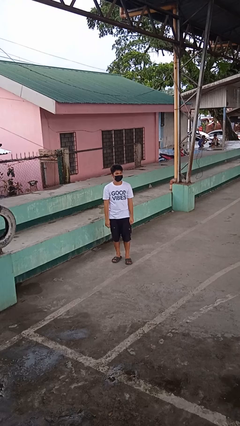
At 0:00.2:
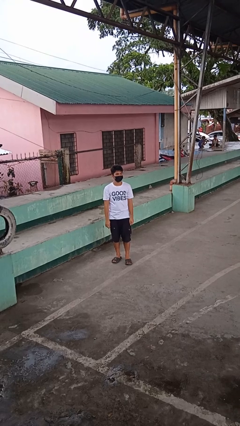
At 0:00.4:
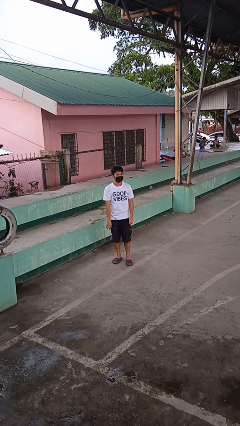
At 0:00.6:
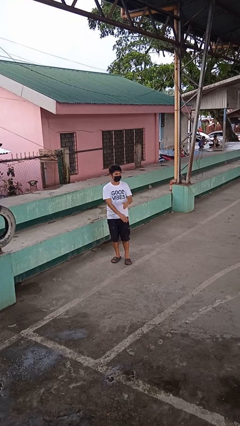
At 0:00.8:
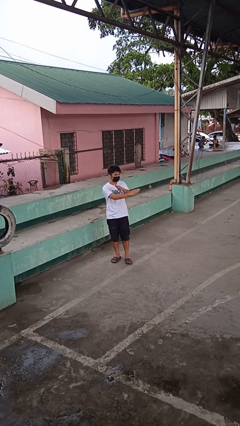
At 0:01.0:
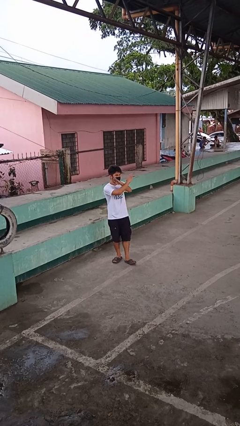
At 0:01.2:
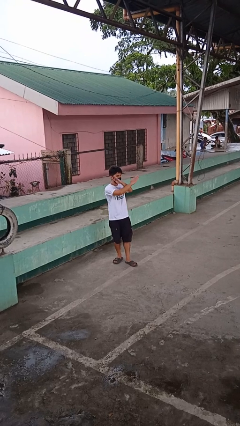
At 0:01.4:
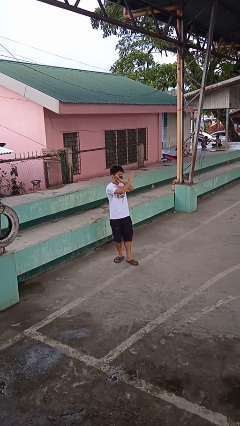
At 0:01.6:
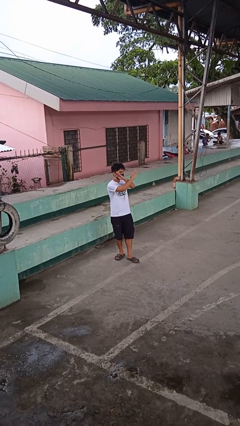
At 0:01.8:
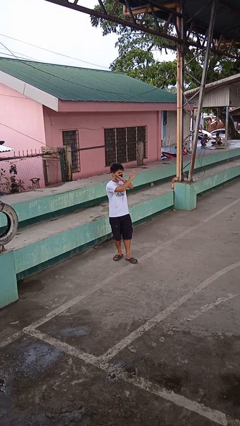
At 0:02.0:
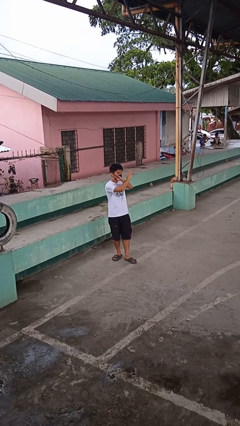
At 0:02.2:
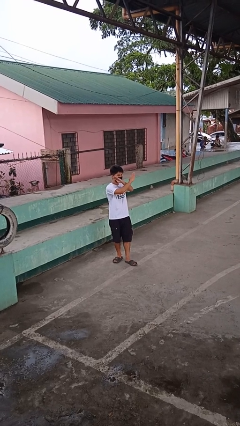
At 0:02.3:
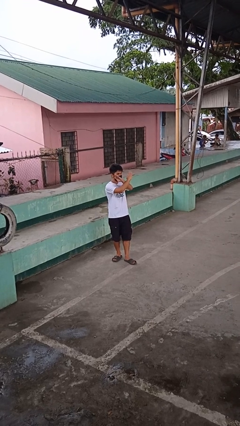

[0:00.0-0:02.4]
person gestures arms x

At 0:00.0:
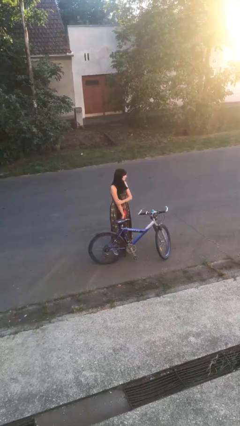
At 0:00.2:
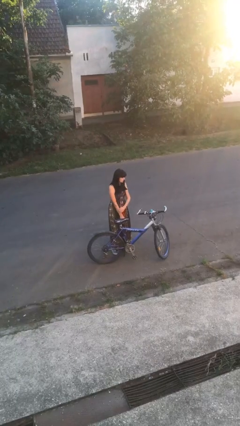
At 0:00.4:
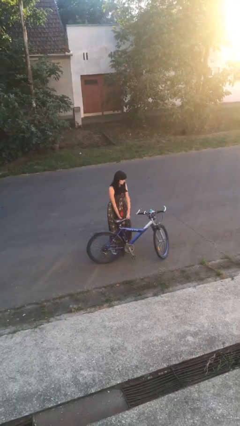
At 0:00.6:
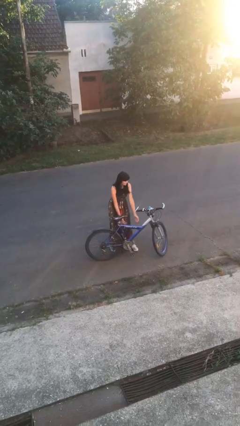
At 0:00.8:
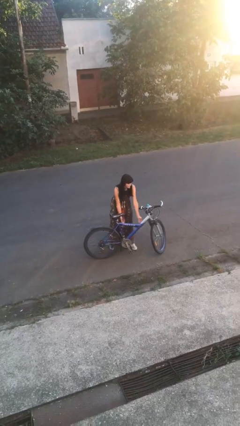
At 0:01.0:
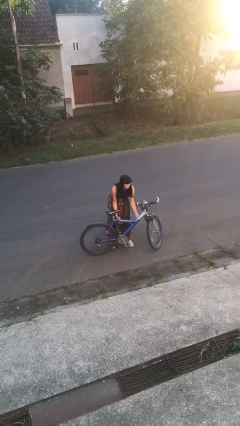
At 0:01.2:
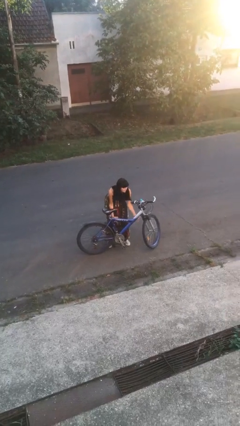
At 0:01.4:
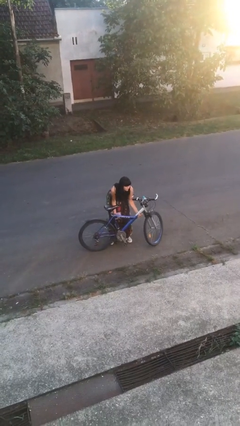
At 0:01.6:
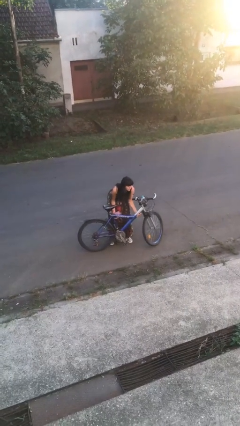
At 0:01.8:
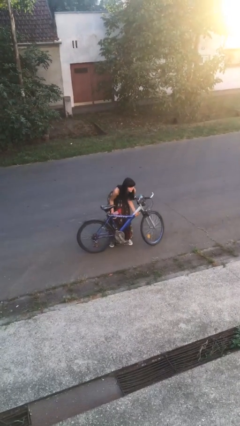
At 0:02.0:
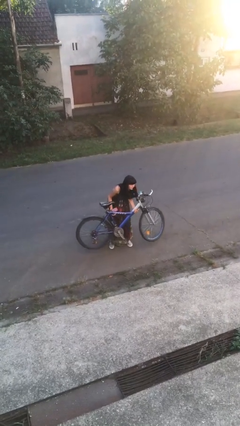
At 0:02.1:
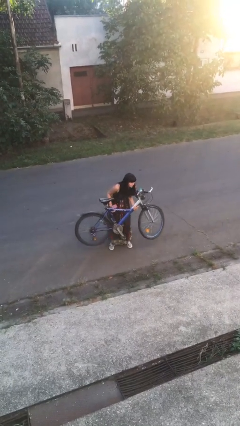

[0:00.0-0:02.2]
person picks up object from floor

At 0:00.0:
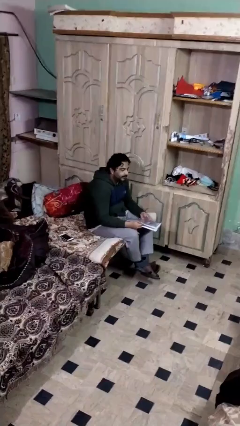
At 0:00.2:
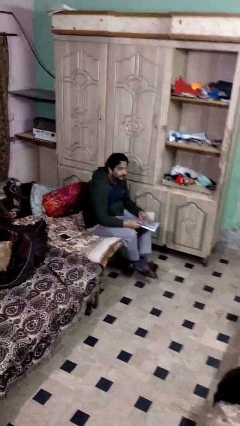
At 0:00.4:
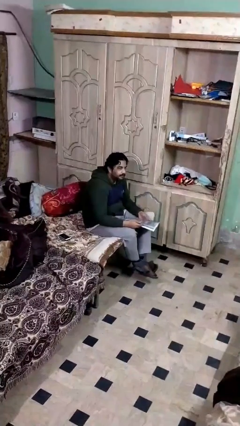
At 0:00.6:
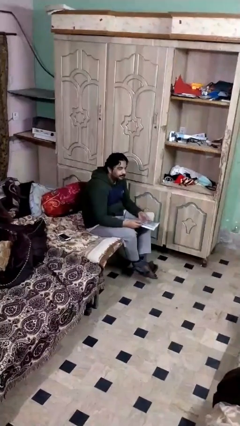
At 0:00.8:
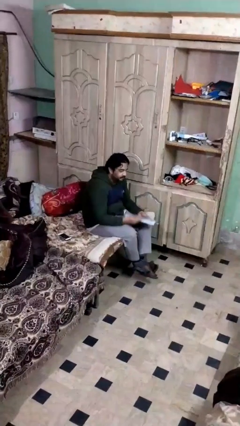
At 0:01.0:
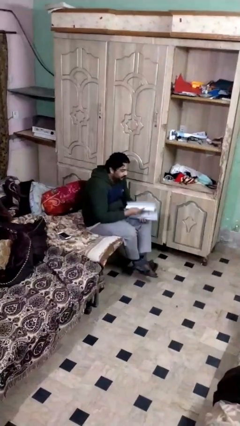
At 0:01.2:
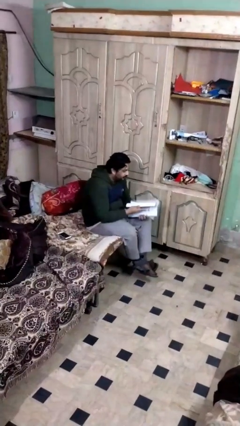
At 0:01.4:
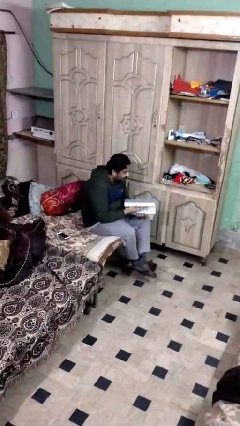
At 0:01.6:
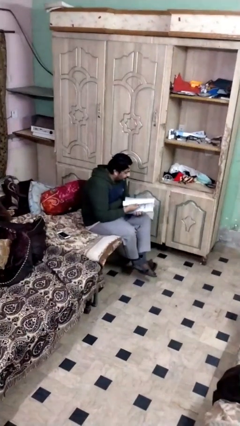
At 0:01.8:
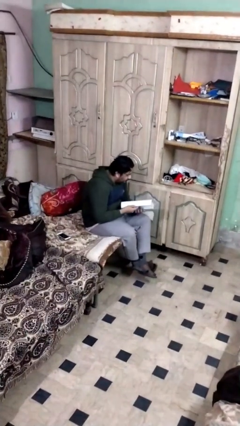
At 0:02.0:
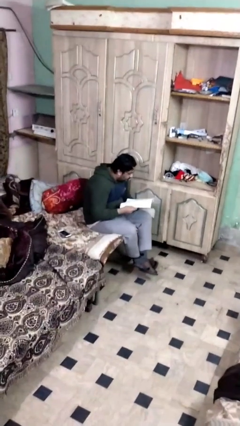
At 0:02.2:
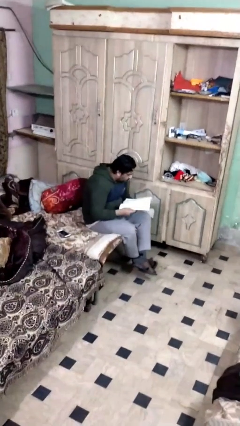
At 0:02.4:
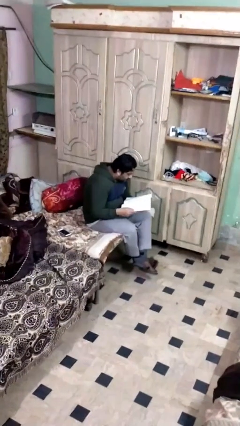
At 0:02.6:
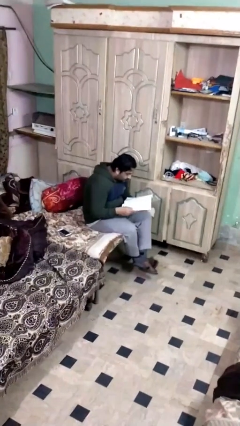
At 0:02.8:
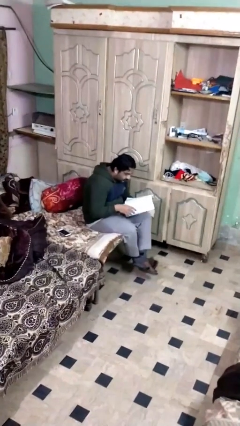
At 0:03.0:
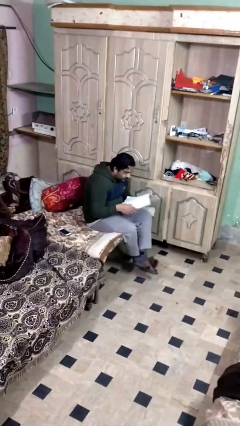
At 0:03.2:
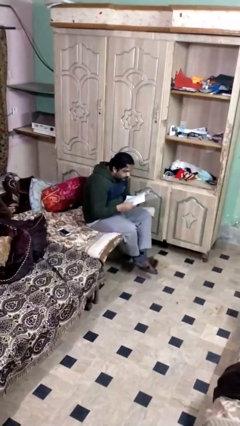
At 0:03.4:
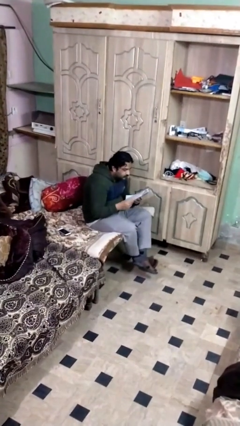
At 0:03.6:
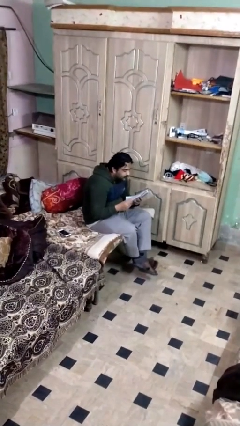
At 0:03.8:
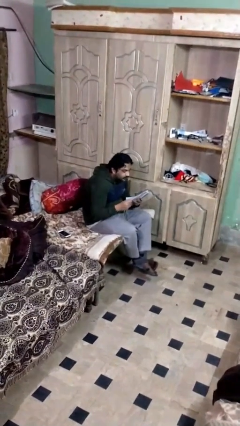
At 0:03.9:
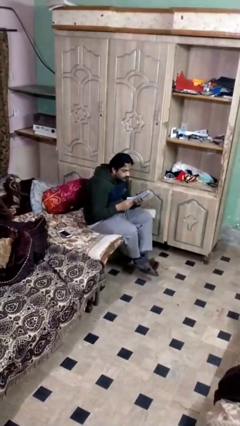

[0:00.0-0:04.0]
person reads document

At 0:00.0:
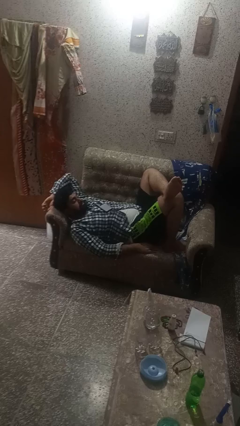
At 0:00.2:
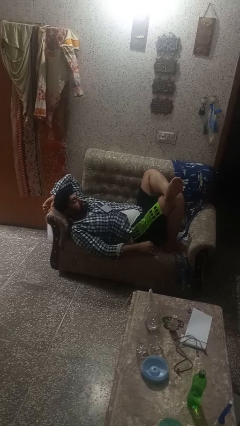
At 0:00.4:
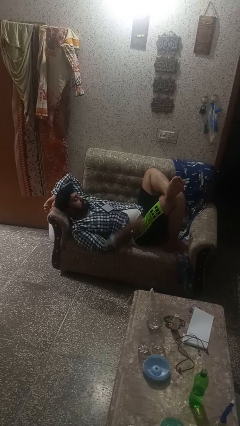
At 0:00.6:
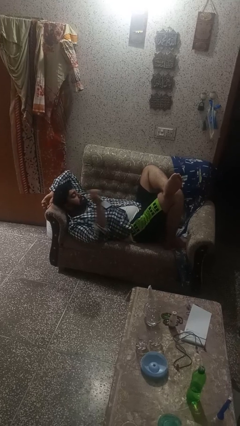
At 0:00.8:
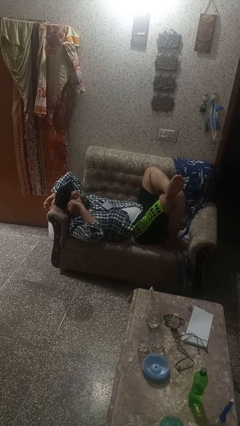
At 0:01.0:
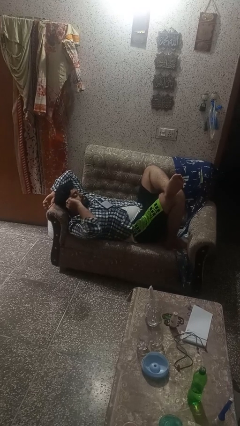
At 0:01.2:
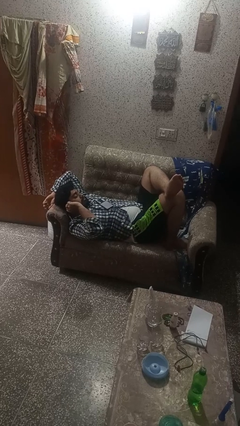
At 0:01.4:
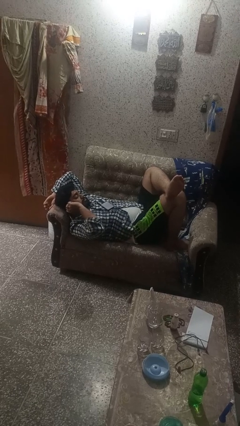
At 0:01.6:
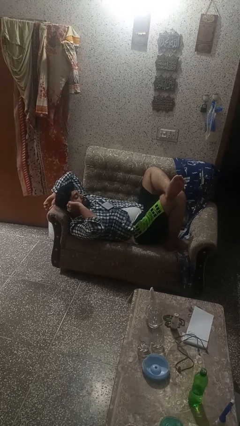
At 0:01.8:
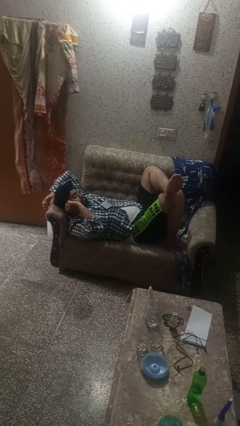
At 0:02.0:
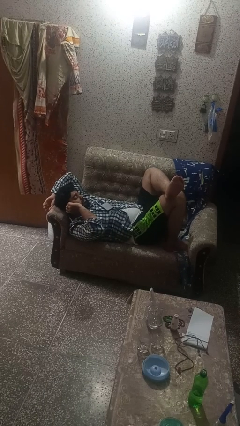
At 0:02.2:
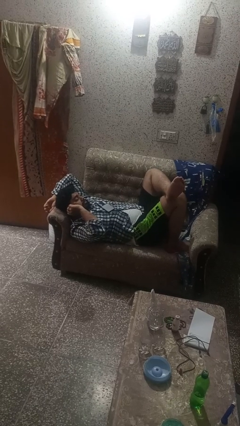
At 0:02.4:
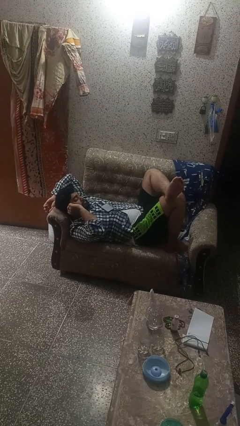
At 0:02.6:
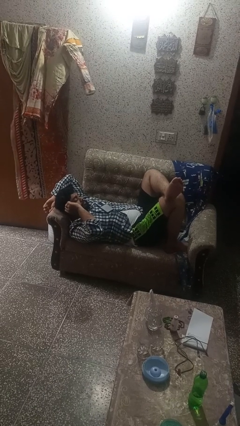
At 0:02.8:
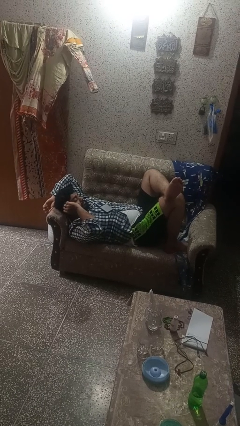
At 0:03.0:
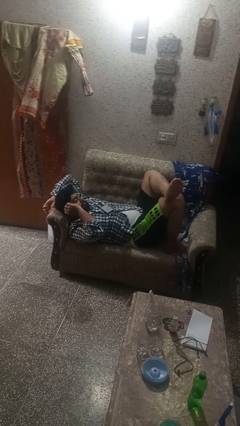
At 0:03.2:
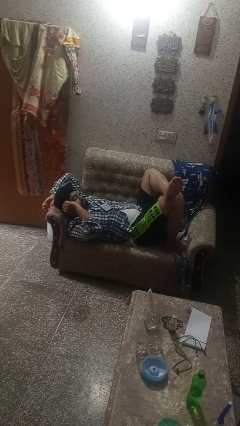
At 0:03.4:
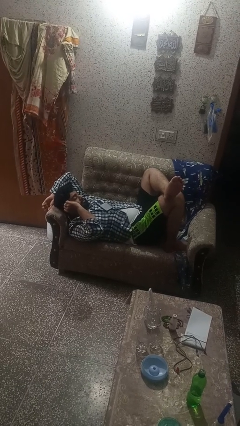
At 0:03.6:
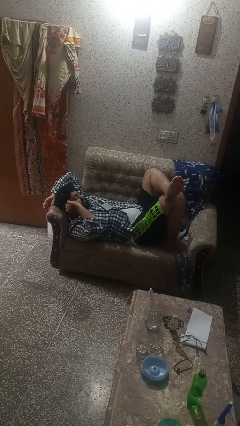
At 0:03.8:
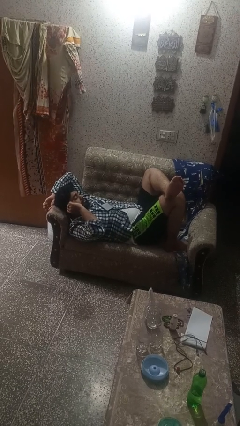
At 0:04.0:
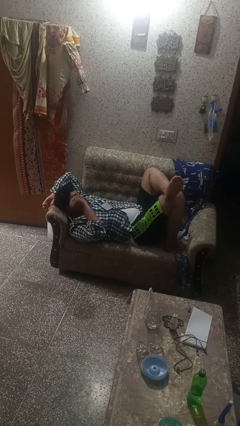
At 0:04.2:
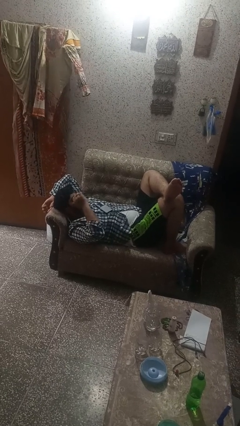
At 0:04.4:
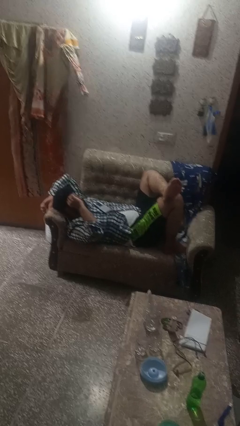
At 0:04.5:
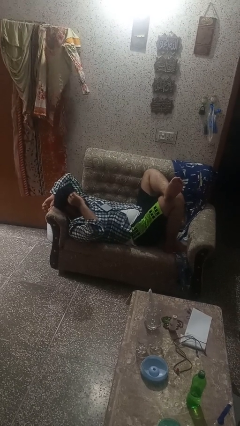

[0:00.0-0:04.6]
person touches earlobe

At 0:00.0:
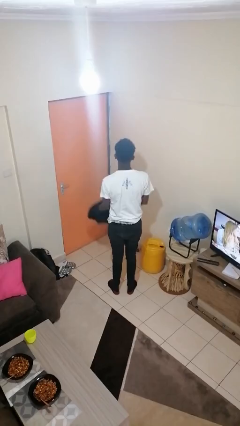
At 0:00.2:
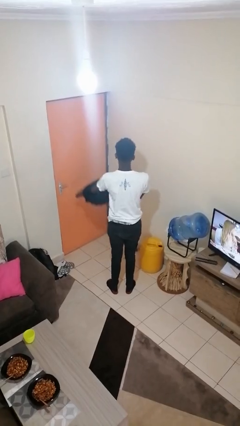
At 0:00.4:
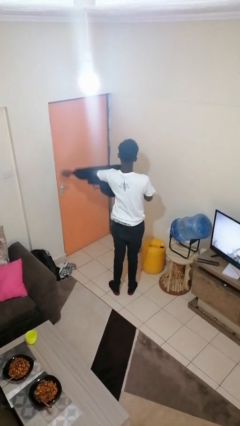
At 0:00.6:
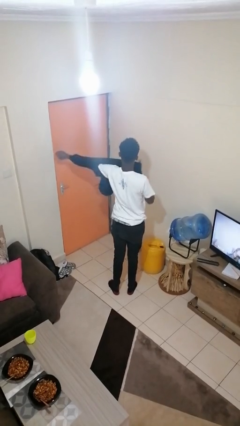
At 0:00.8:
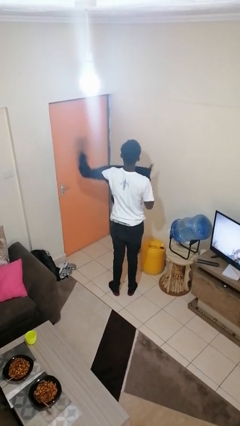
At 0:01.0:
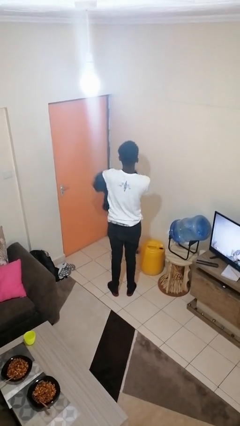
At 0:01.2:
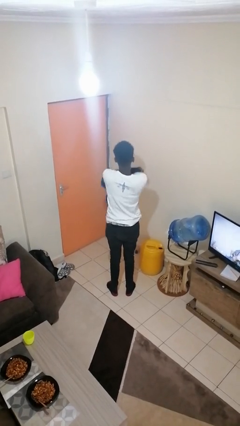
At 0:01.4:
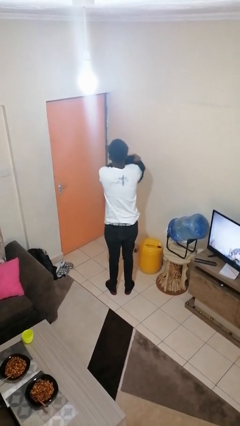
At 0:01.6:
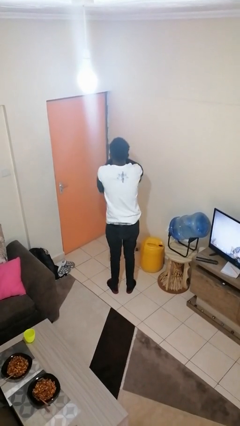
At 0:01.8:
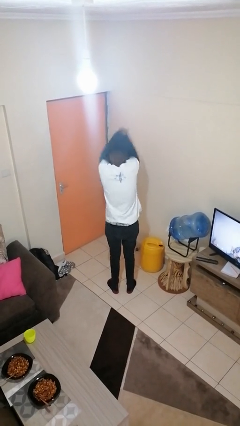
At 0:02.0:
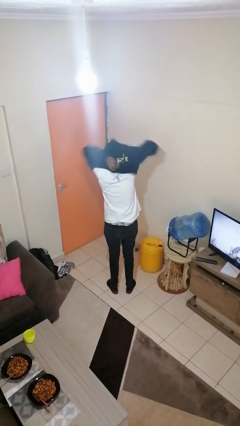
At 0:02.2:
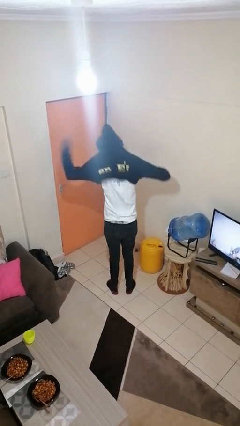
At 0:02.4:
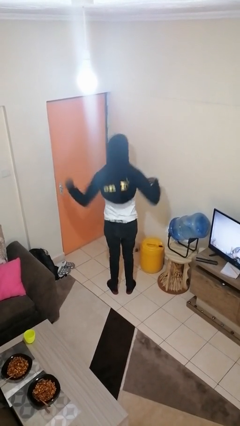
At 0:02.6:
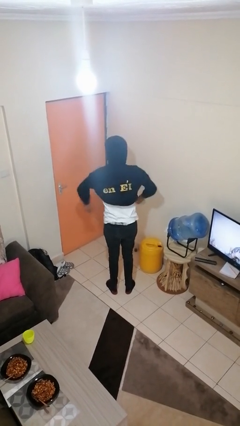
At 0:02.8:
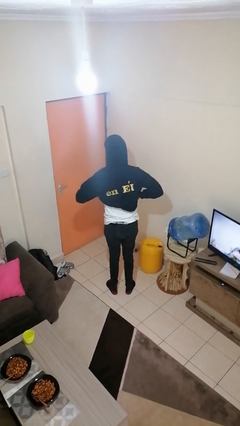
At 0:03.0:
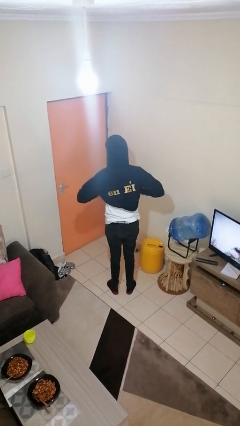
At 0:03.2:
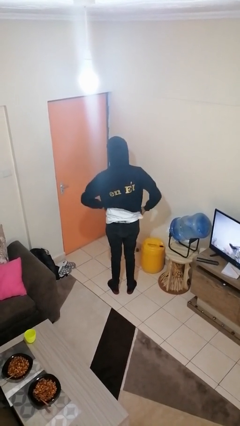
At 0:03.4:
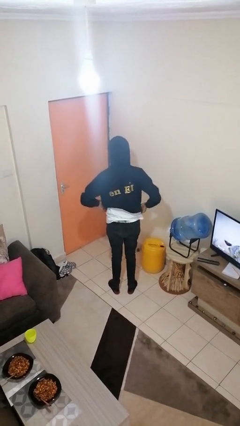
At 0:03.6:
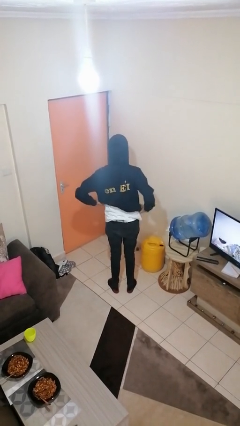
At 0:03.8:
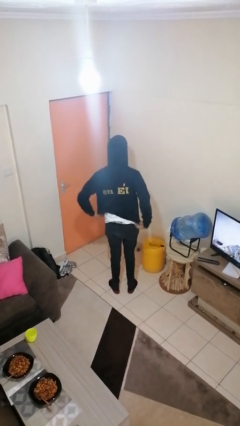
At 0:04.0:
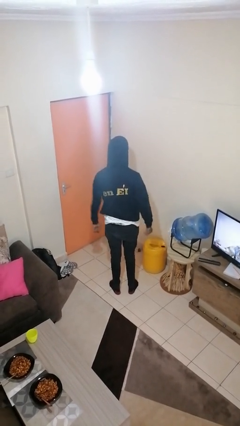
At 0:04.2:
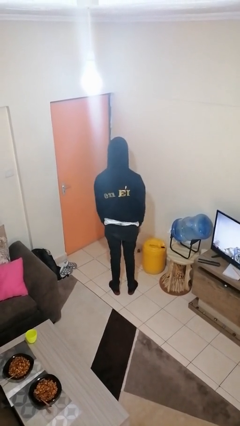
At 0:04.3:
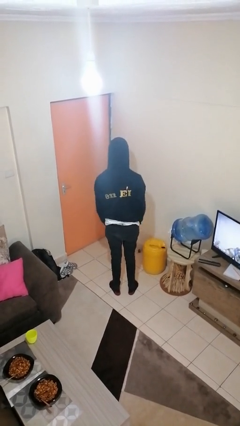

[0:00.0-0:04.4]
person puts on hoodie

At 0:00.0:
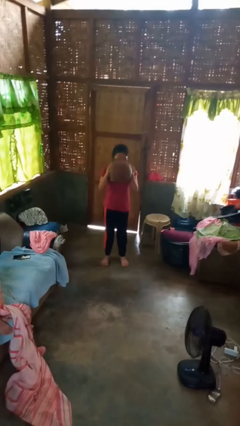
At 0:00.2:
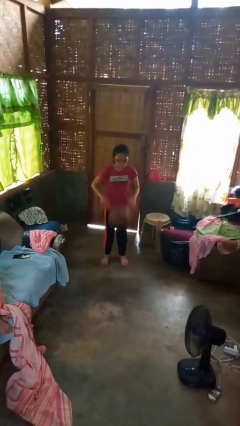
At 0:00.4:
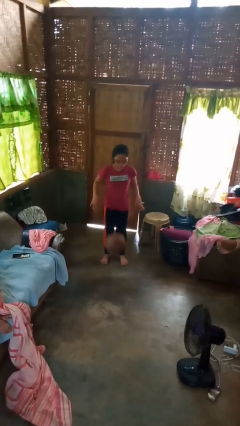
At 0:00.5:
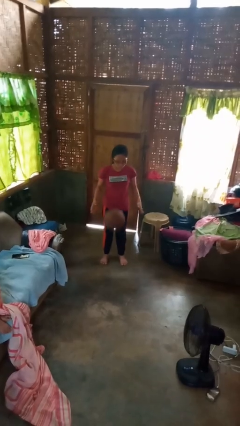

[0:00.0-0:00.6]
person bounces ball on floor
